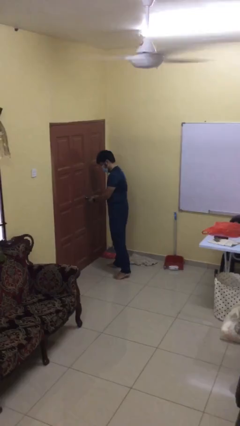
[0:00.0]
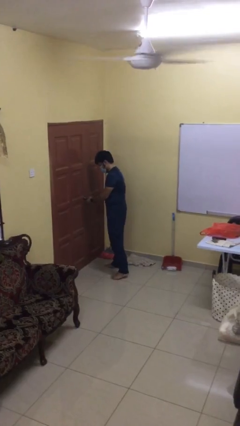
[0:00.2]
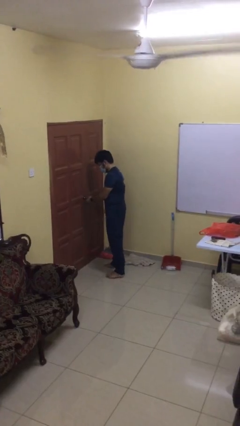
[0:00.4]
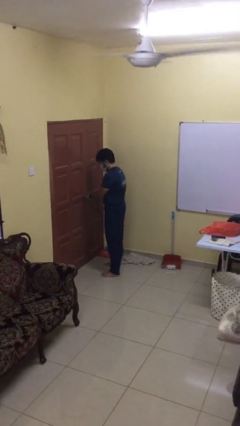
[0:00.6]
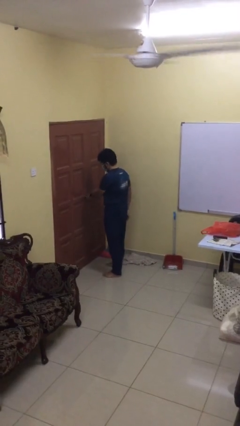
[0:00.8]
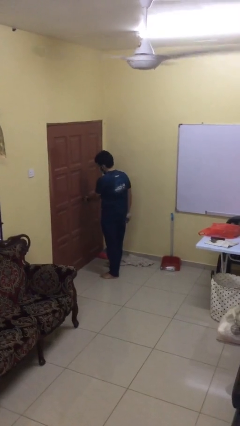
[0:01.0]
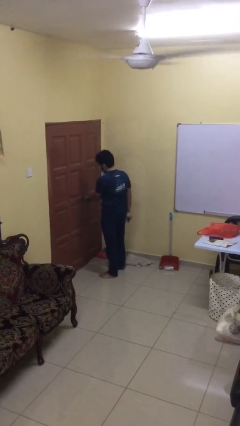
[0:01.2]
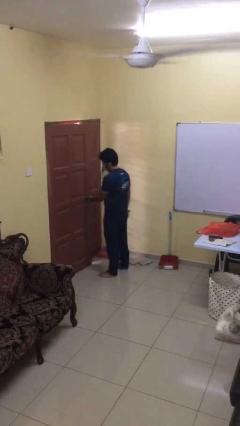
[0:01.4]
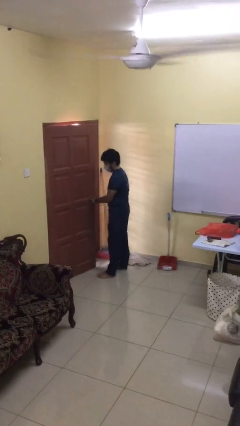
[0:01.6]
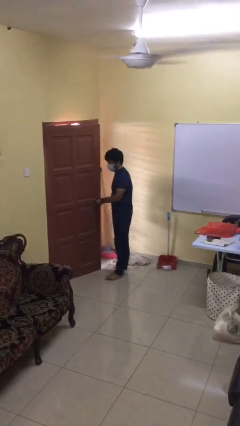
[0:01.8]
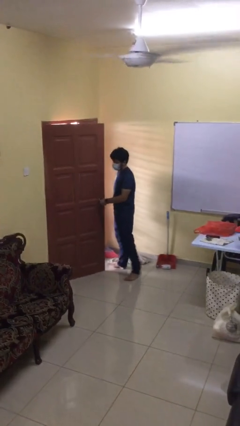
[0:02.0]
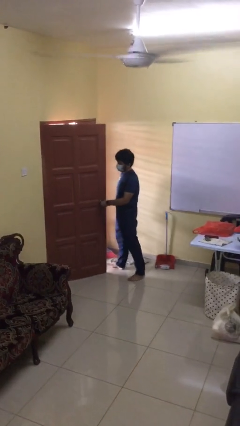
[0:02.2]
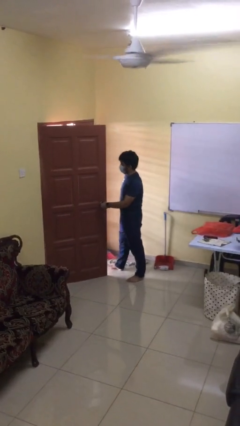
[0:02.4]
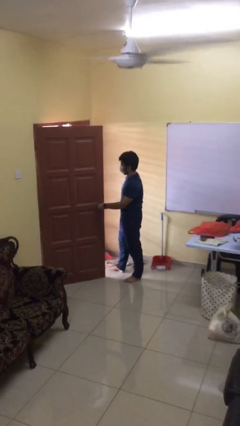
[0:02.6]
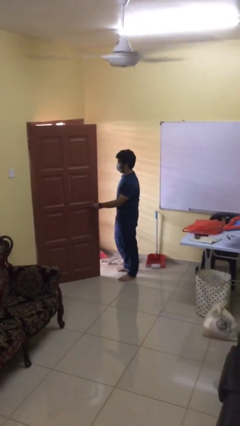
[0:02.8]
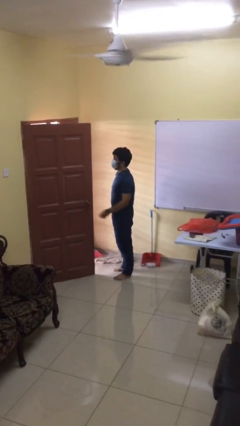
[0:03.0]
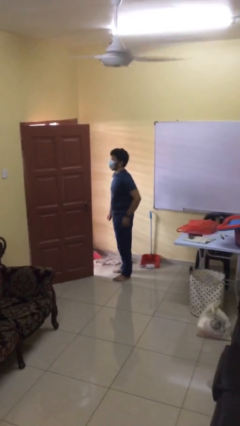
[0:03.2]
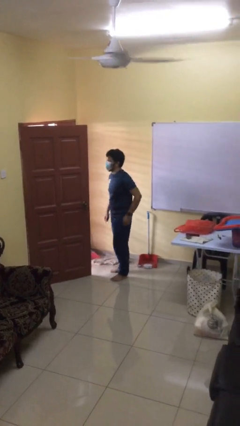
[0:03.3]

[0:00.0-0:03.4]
person opens facility door

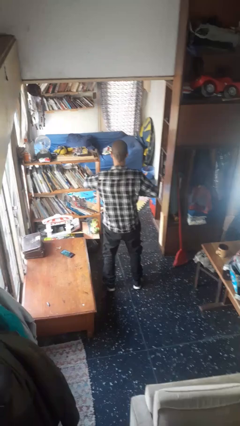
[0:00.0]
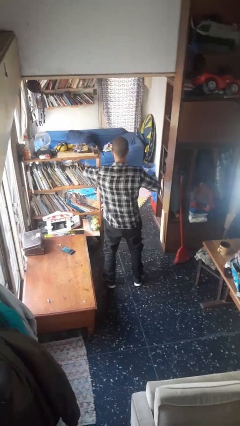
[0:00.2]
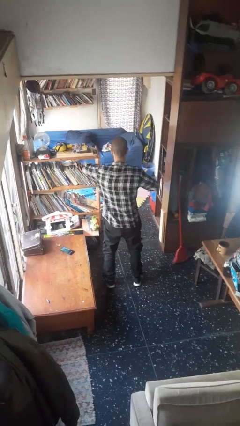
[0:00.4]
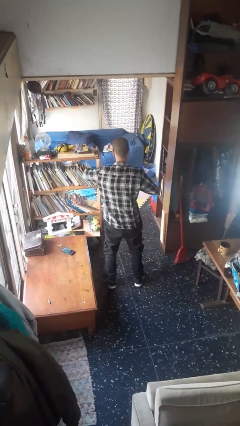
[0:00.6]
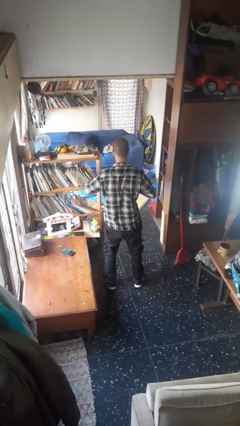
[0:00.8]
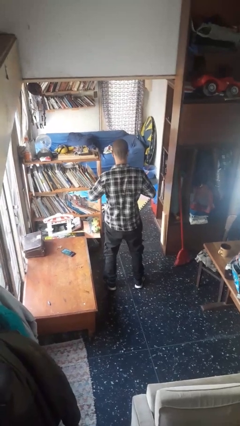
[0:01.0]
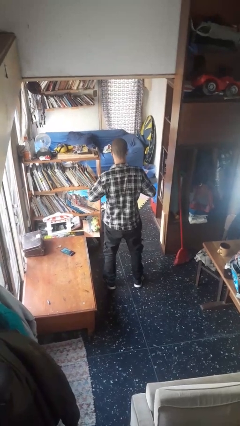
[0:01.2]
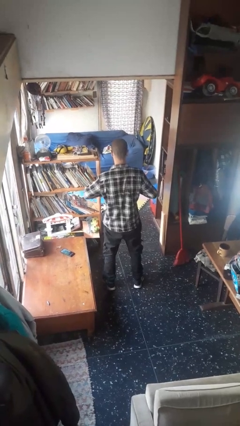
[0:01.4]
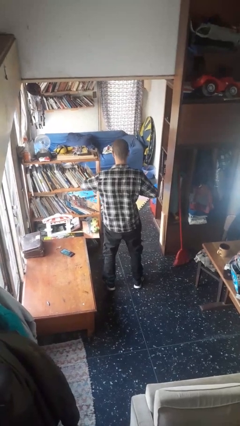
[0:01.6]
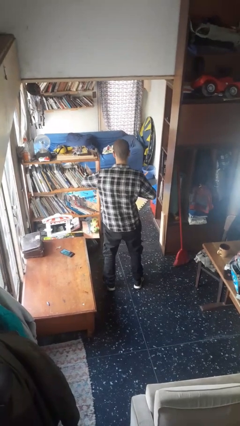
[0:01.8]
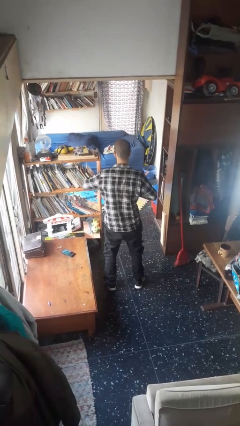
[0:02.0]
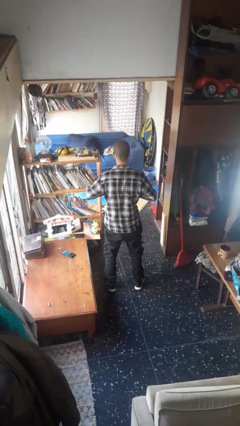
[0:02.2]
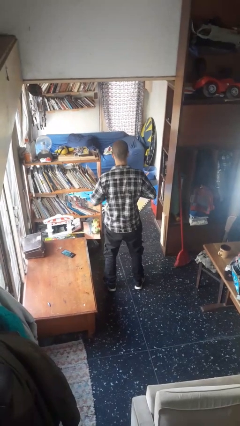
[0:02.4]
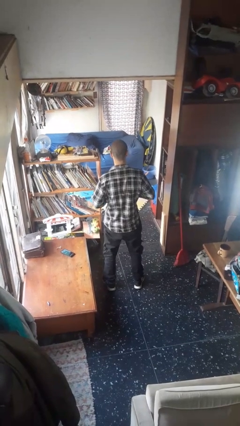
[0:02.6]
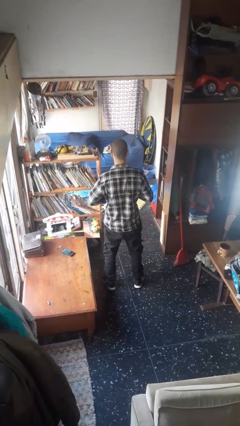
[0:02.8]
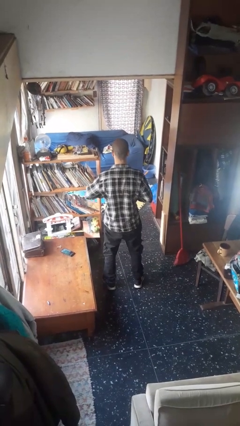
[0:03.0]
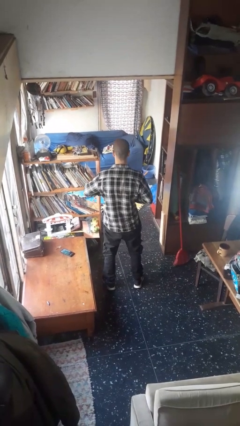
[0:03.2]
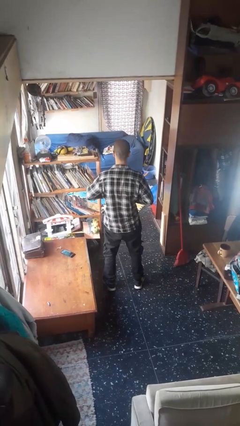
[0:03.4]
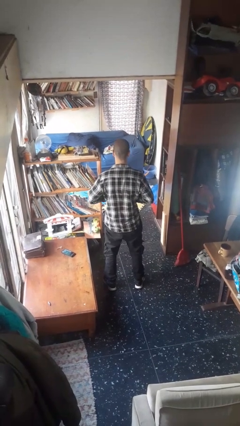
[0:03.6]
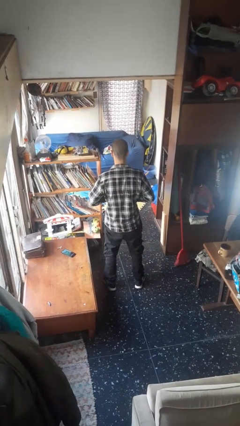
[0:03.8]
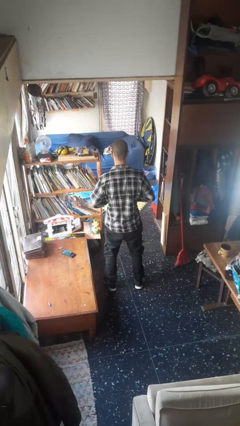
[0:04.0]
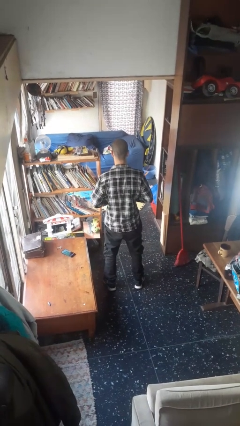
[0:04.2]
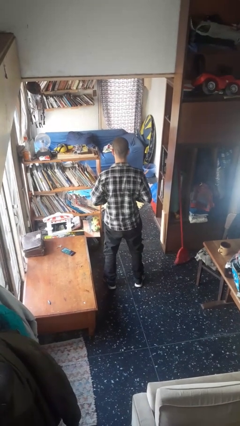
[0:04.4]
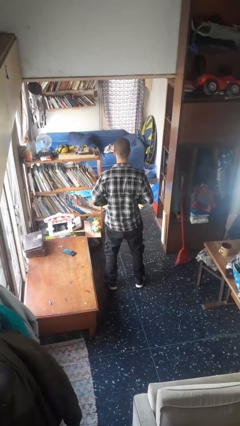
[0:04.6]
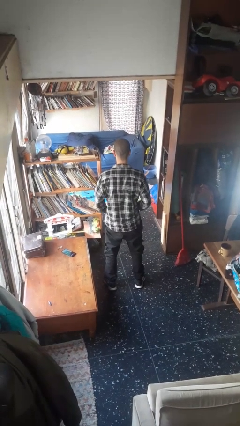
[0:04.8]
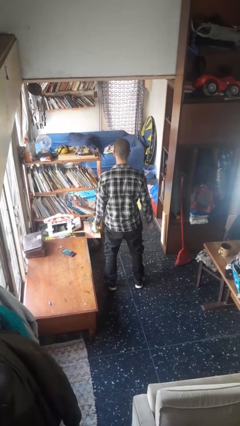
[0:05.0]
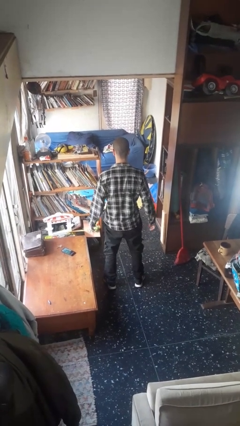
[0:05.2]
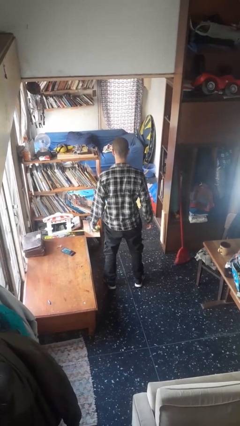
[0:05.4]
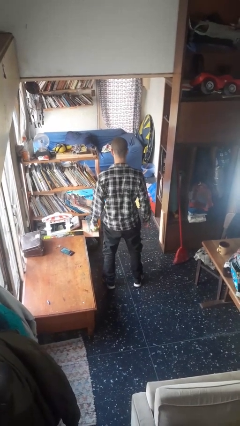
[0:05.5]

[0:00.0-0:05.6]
person unbuttons shirt

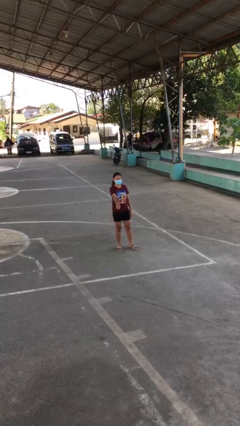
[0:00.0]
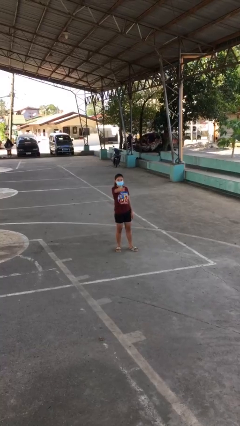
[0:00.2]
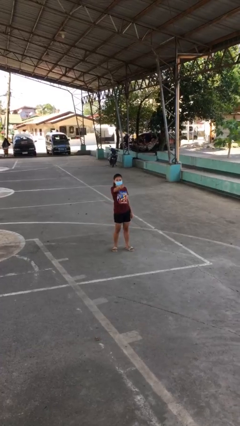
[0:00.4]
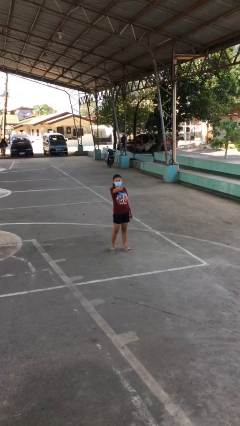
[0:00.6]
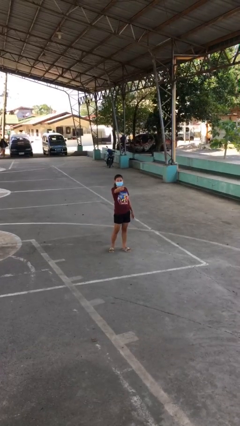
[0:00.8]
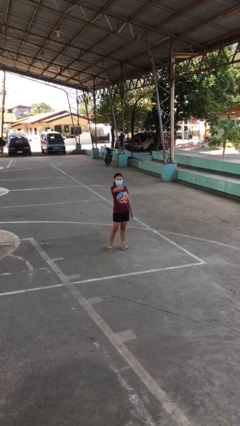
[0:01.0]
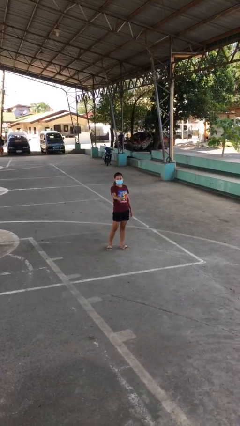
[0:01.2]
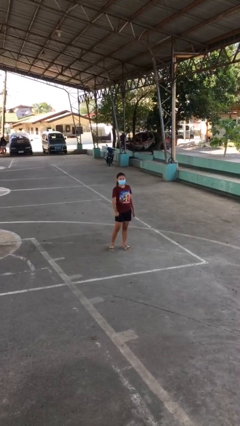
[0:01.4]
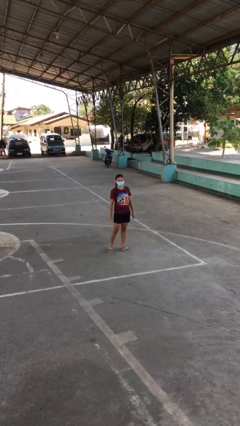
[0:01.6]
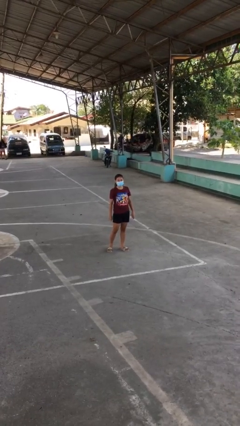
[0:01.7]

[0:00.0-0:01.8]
person points at person

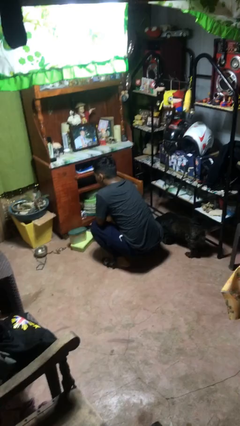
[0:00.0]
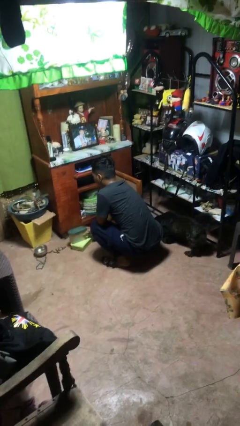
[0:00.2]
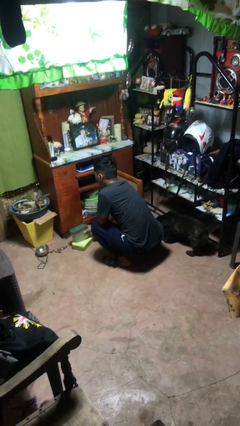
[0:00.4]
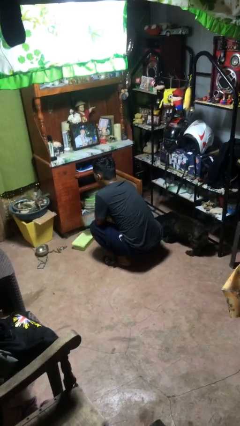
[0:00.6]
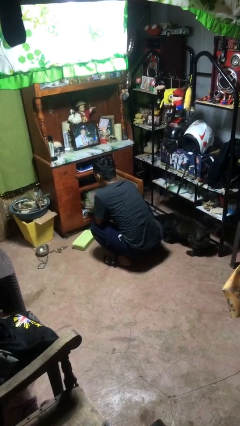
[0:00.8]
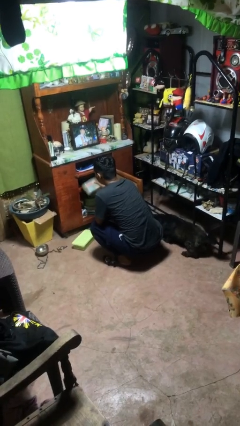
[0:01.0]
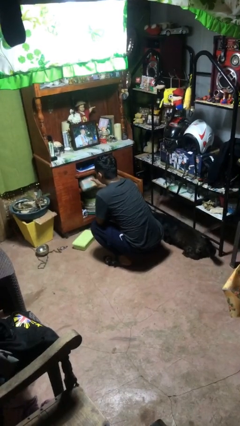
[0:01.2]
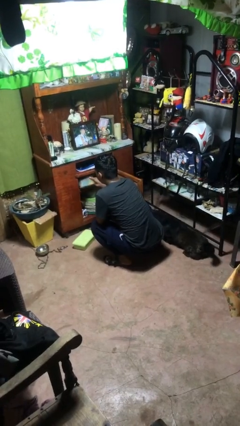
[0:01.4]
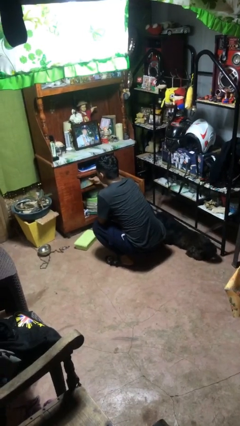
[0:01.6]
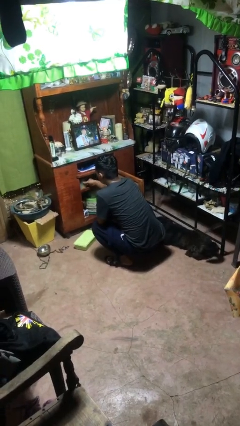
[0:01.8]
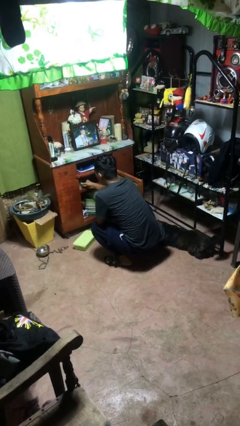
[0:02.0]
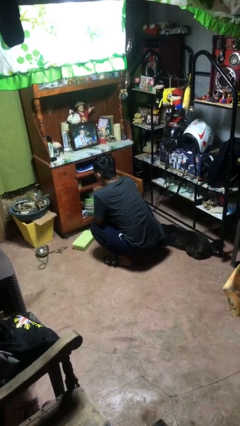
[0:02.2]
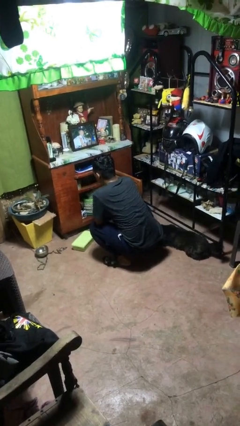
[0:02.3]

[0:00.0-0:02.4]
person puts object in cabinet

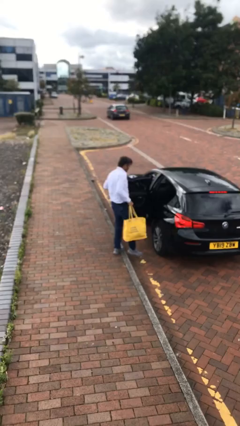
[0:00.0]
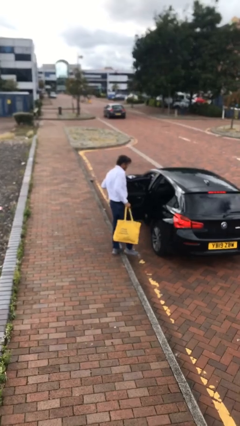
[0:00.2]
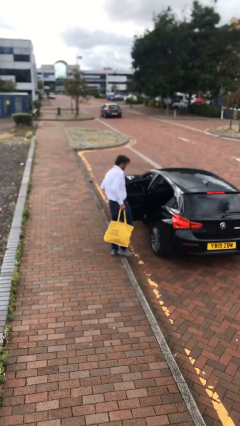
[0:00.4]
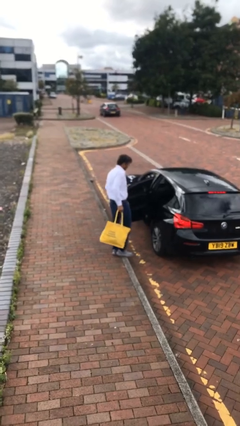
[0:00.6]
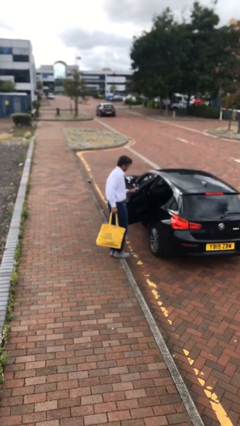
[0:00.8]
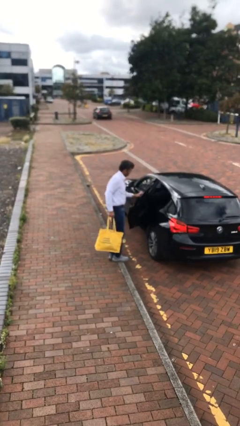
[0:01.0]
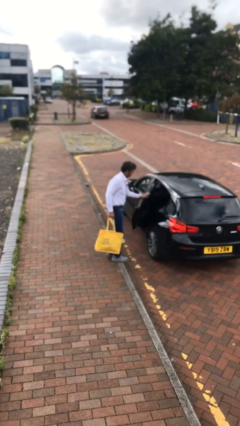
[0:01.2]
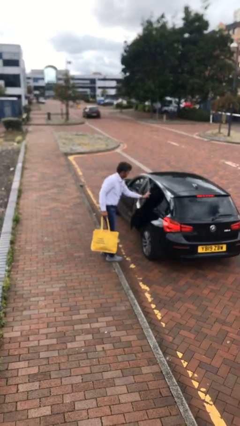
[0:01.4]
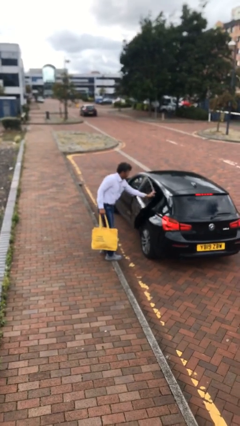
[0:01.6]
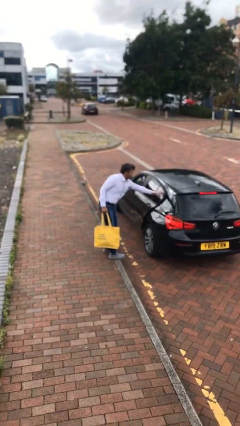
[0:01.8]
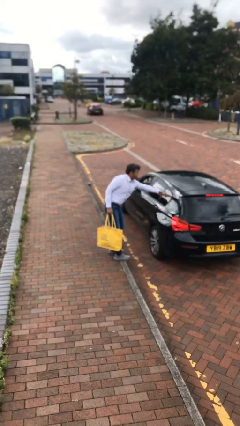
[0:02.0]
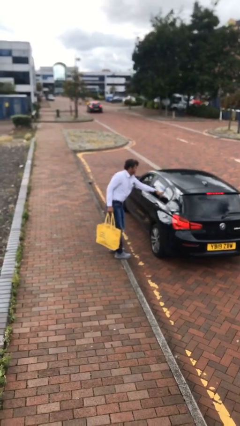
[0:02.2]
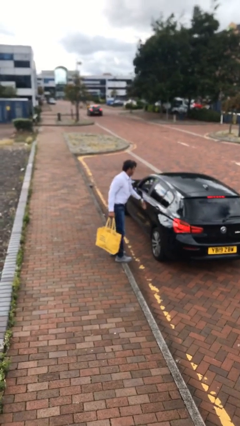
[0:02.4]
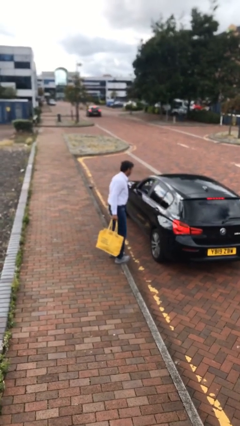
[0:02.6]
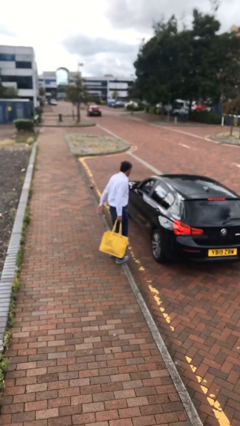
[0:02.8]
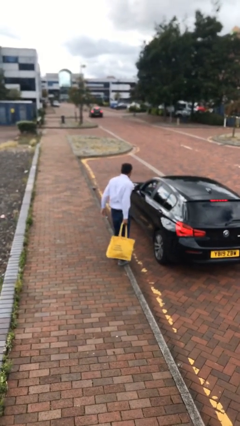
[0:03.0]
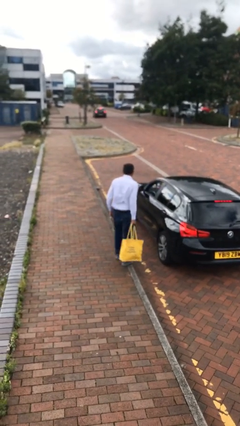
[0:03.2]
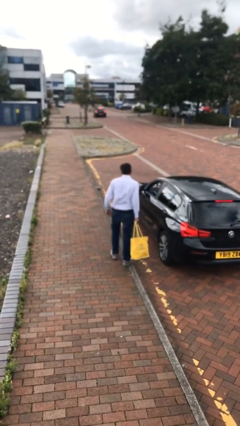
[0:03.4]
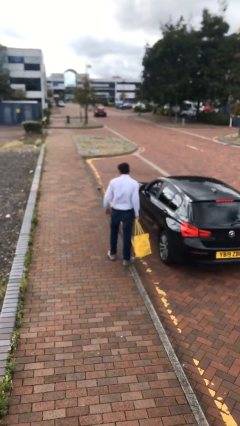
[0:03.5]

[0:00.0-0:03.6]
person closes car door

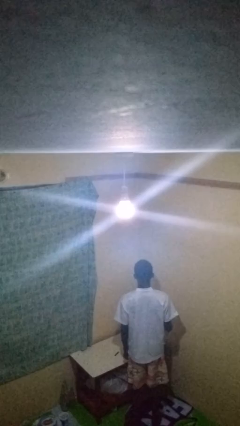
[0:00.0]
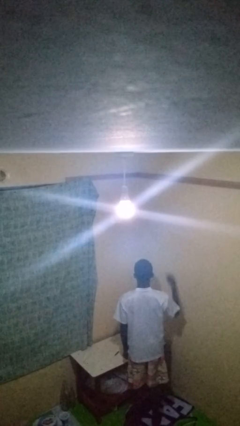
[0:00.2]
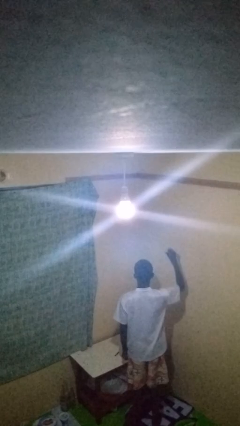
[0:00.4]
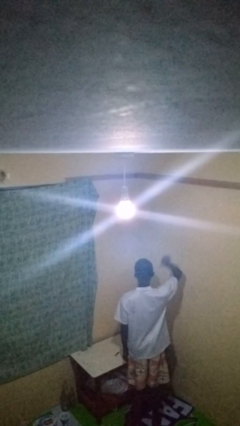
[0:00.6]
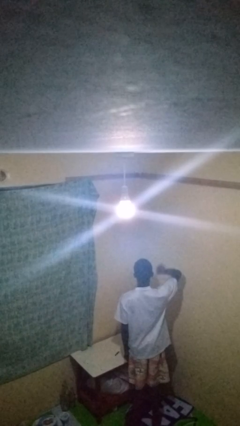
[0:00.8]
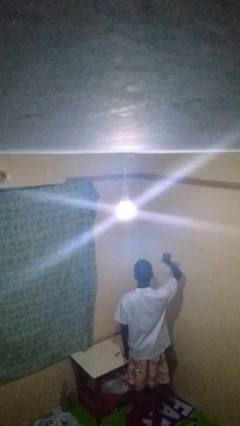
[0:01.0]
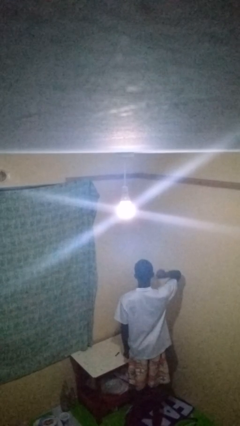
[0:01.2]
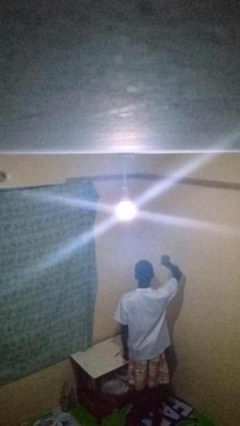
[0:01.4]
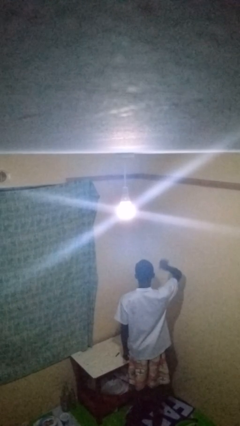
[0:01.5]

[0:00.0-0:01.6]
person gestures behind me
